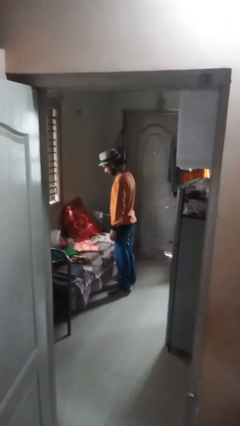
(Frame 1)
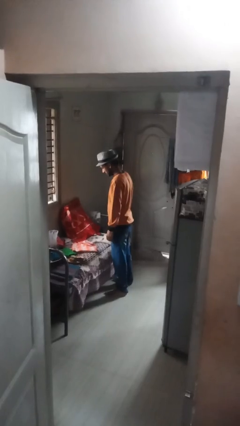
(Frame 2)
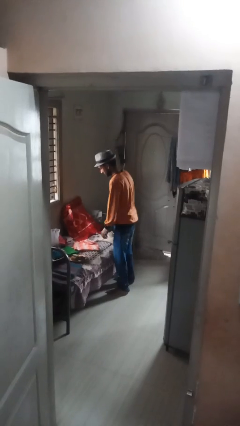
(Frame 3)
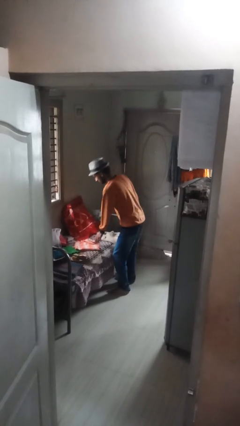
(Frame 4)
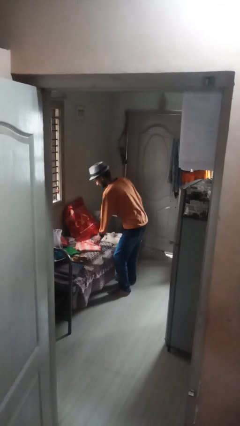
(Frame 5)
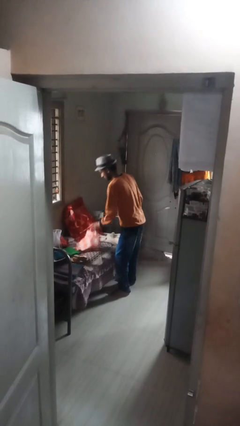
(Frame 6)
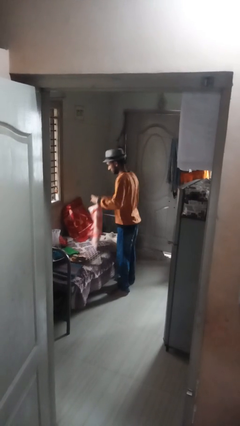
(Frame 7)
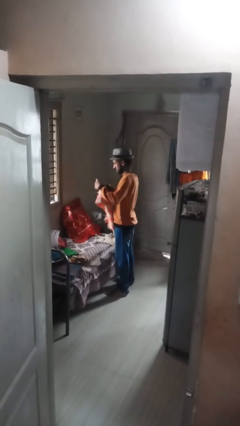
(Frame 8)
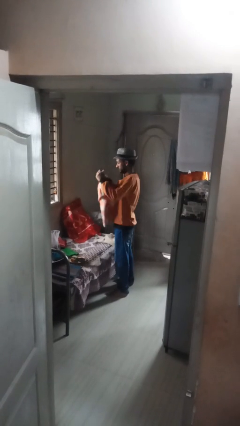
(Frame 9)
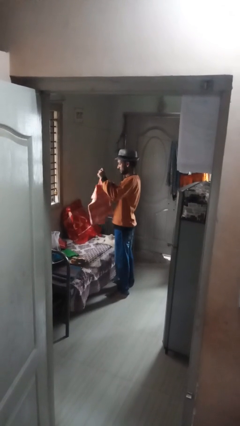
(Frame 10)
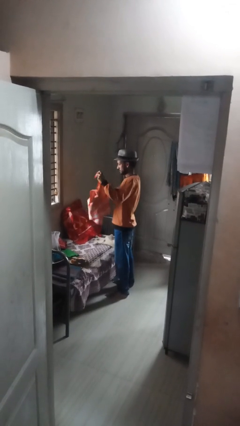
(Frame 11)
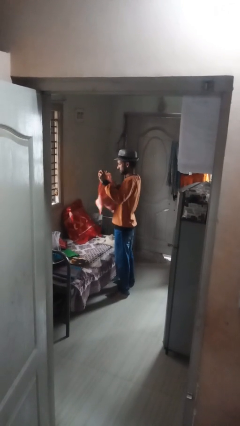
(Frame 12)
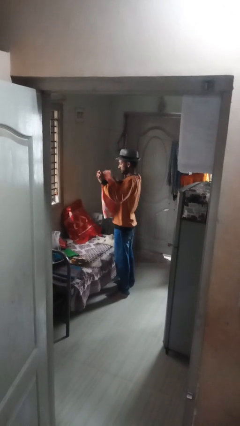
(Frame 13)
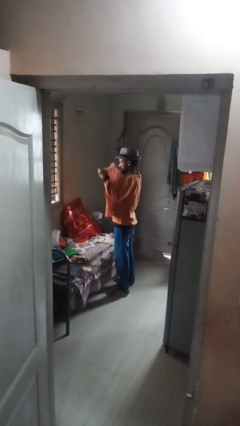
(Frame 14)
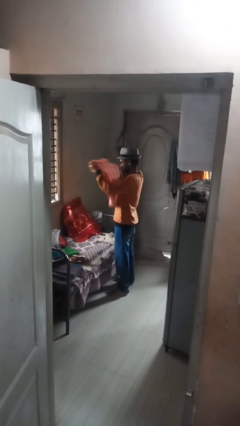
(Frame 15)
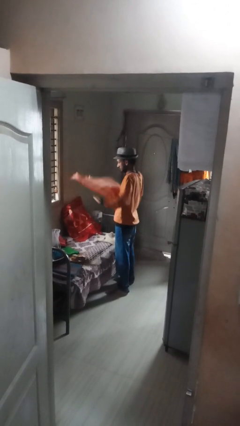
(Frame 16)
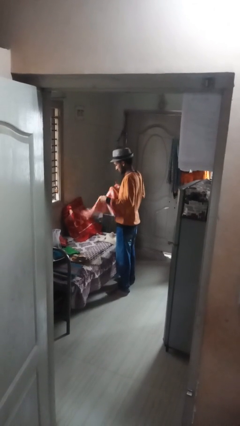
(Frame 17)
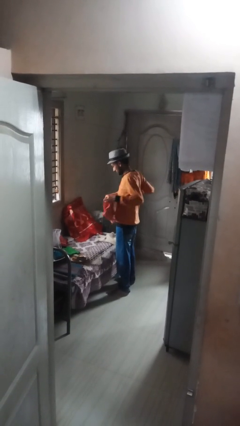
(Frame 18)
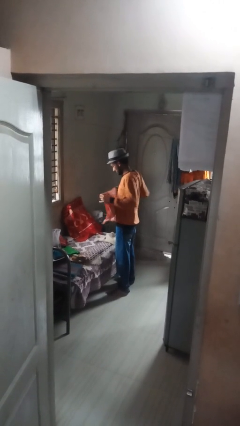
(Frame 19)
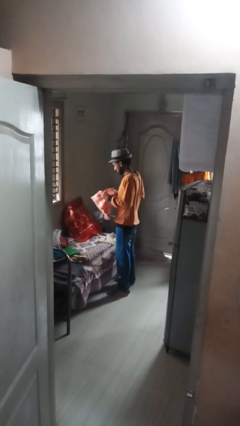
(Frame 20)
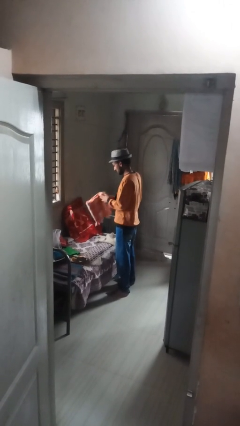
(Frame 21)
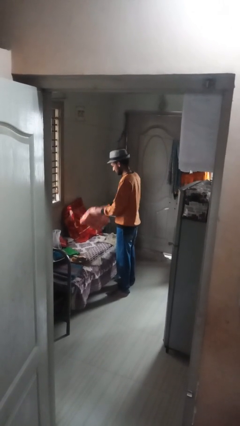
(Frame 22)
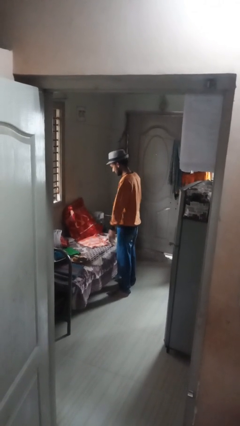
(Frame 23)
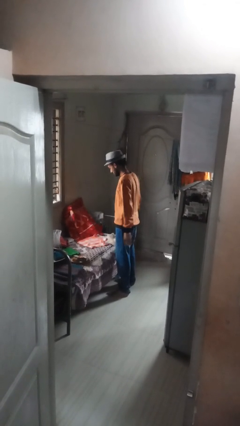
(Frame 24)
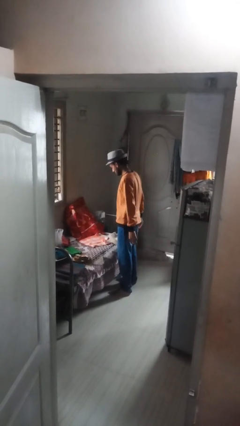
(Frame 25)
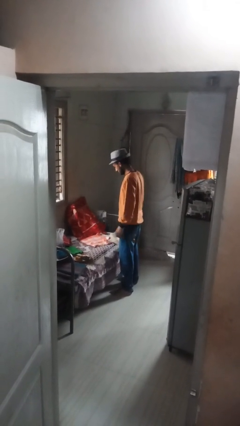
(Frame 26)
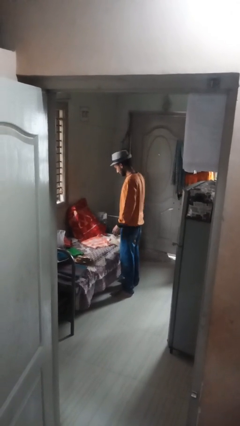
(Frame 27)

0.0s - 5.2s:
person folds towel

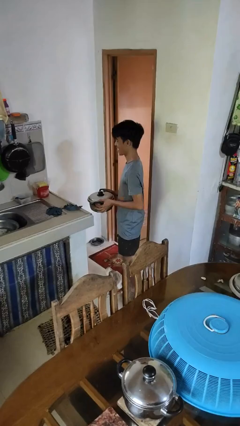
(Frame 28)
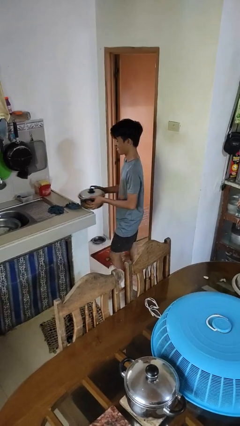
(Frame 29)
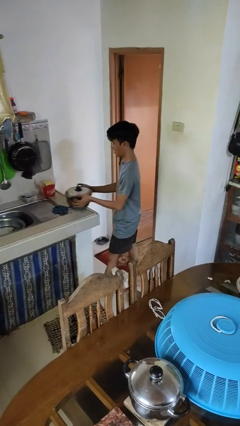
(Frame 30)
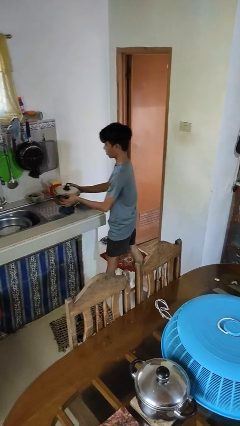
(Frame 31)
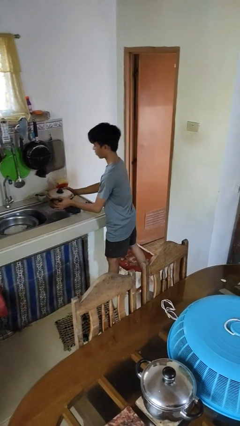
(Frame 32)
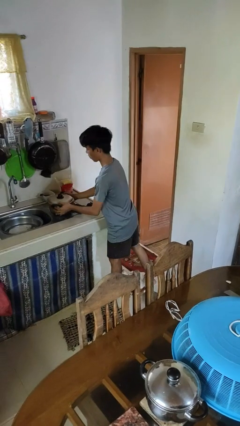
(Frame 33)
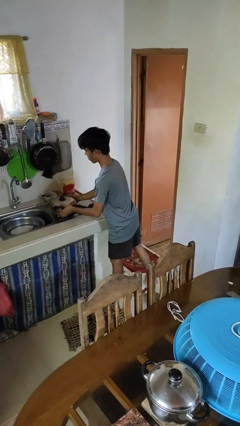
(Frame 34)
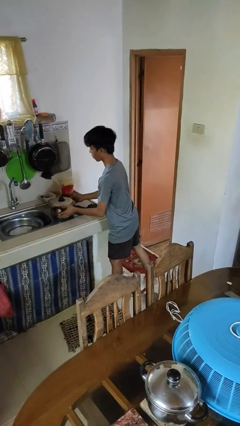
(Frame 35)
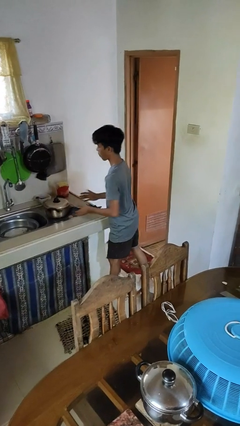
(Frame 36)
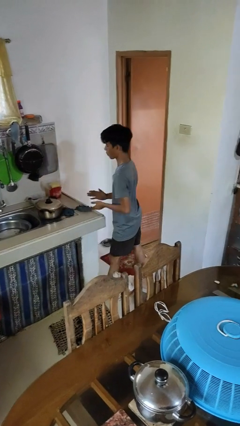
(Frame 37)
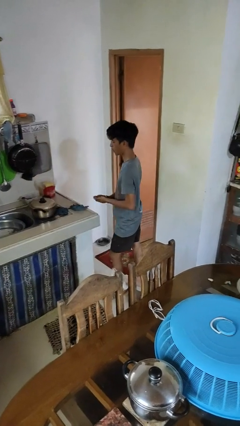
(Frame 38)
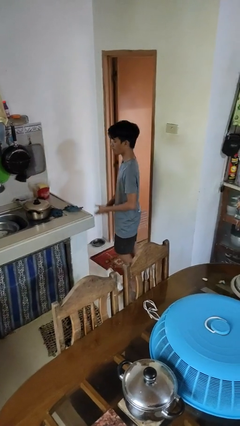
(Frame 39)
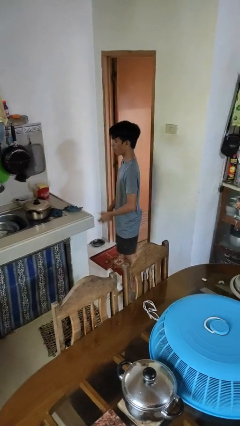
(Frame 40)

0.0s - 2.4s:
person puts down object on countertop

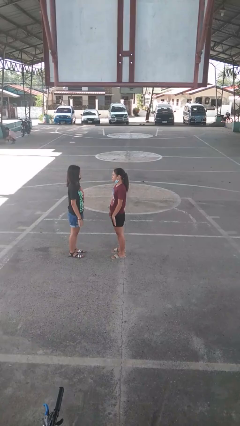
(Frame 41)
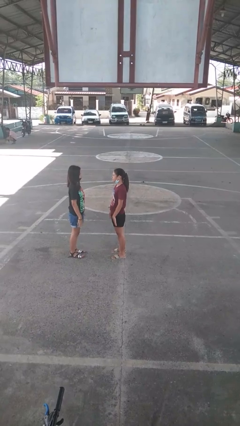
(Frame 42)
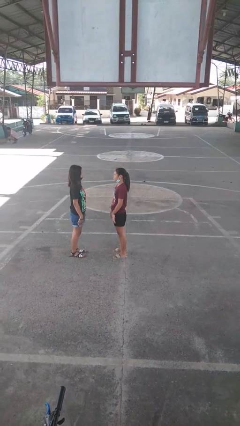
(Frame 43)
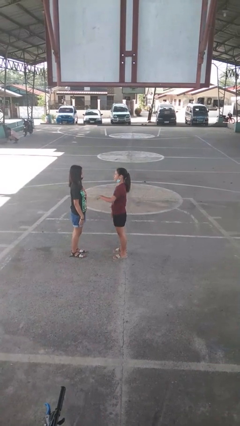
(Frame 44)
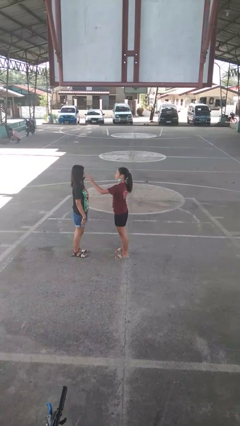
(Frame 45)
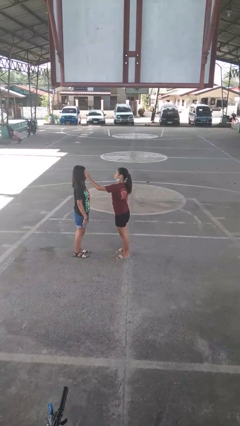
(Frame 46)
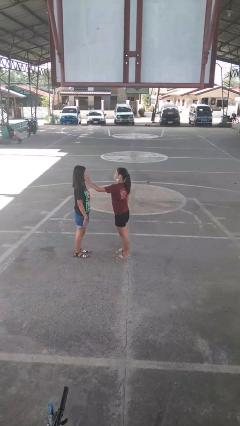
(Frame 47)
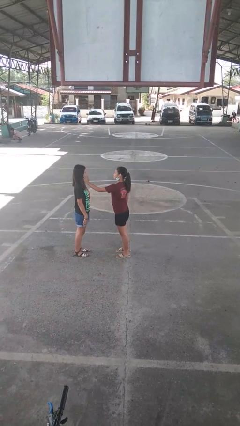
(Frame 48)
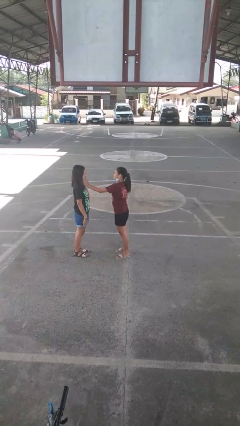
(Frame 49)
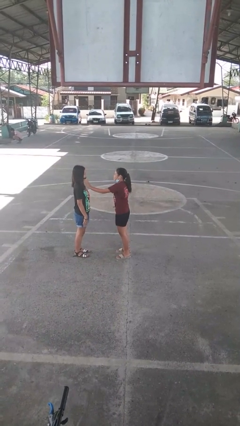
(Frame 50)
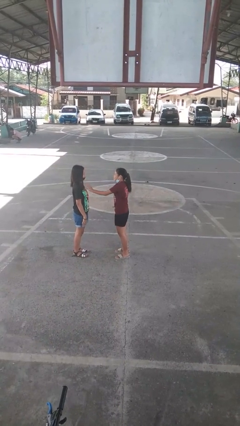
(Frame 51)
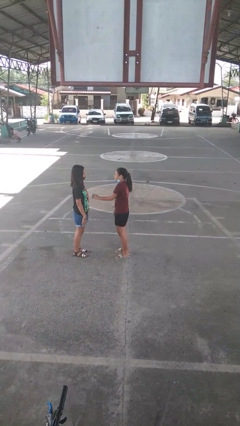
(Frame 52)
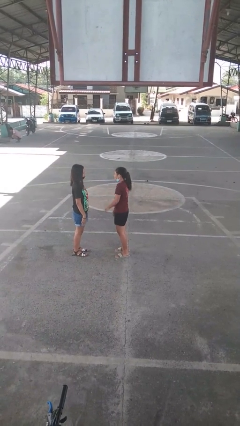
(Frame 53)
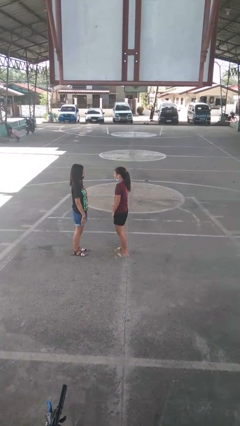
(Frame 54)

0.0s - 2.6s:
person touches face of person

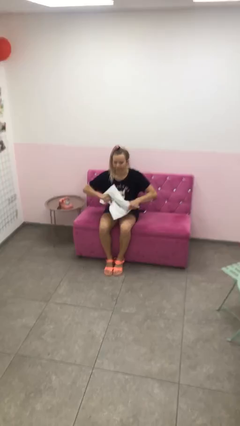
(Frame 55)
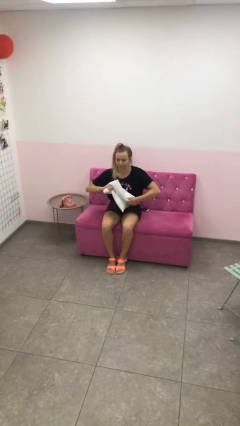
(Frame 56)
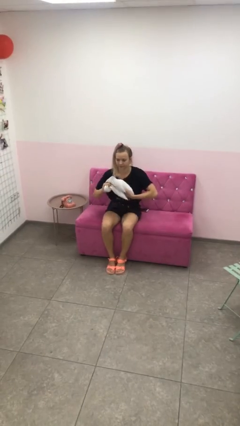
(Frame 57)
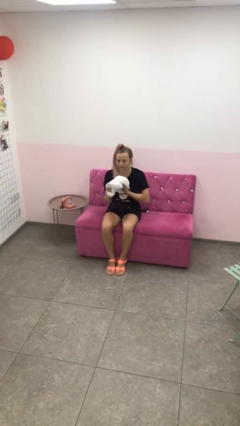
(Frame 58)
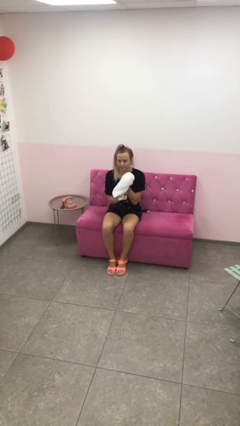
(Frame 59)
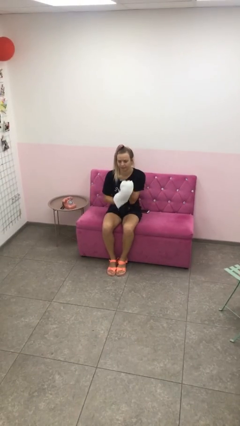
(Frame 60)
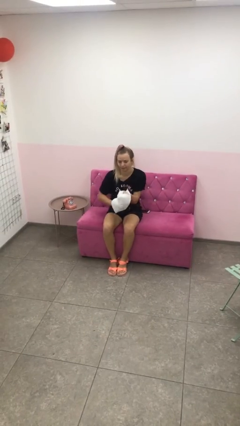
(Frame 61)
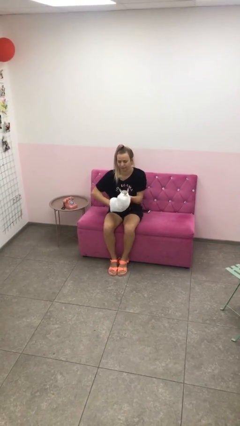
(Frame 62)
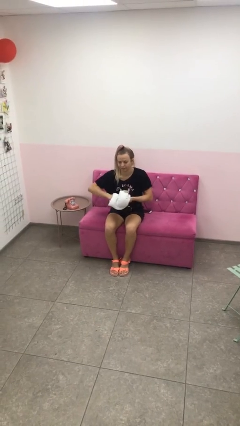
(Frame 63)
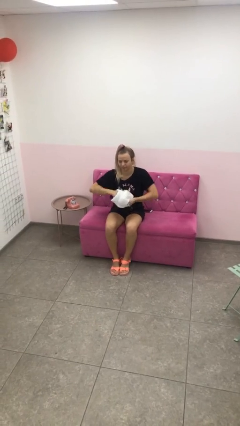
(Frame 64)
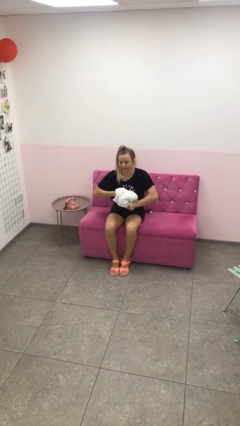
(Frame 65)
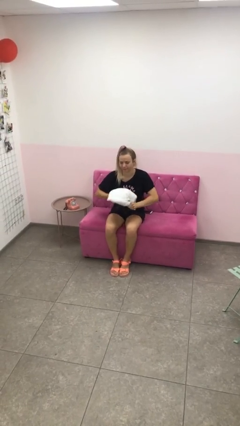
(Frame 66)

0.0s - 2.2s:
person squeezes object

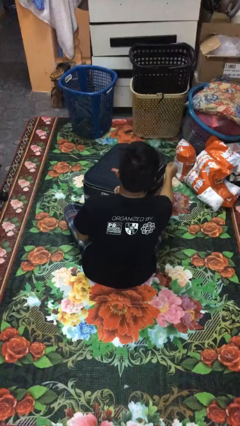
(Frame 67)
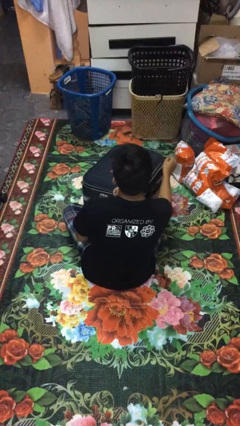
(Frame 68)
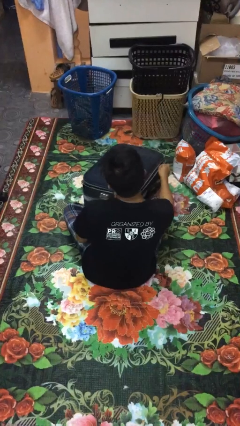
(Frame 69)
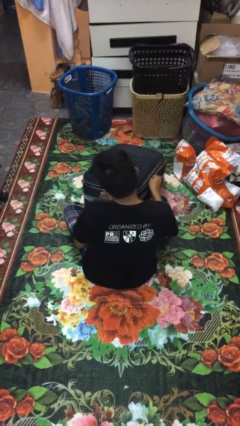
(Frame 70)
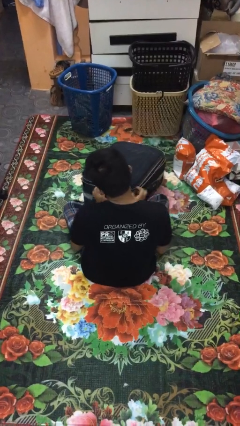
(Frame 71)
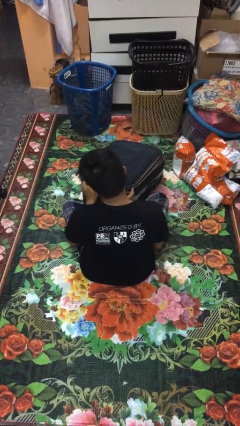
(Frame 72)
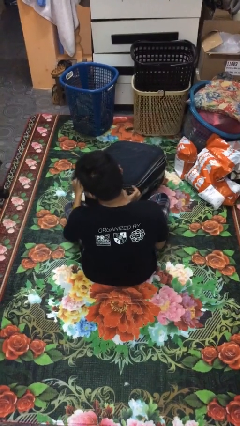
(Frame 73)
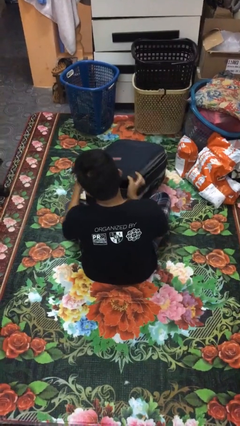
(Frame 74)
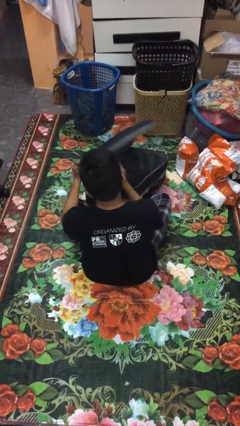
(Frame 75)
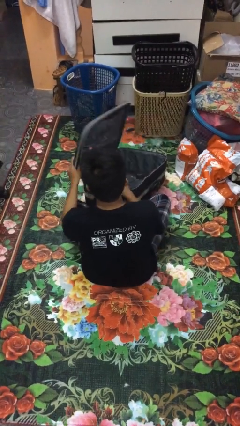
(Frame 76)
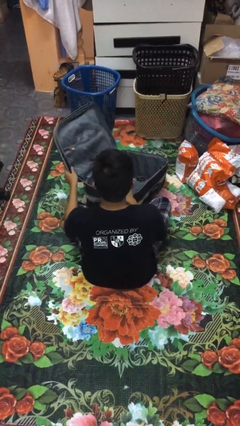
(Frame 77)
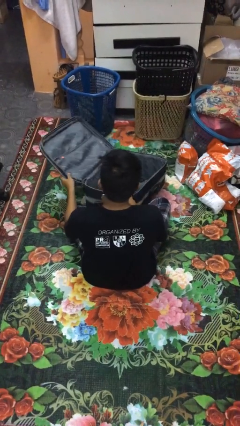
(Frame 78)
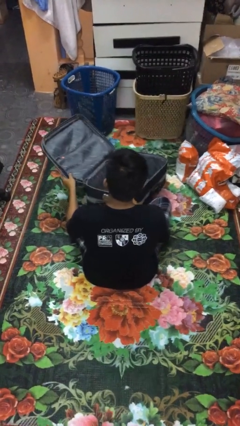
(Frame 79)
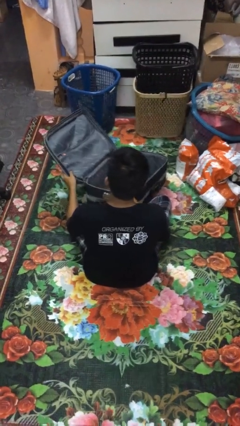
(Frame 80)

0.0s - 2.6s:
person opens suitcase

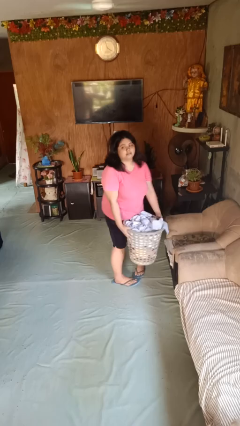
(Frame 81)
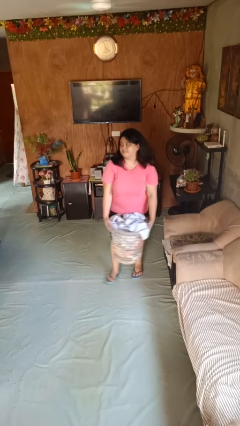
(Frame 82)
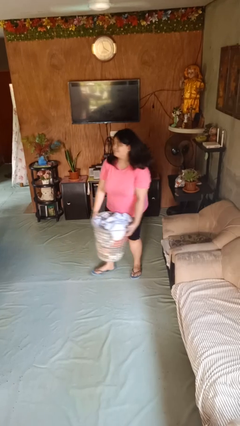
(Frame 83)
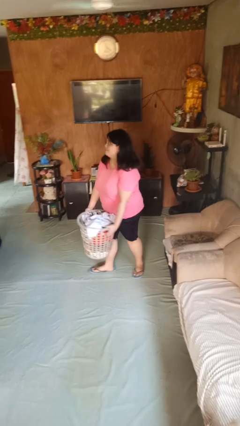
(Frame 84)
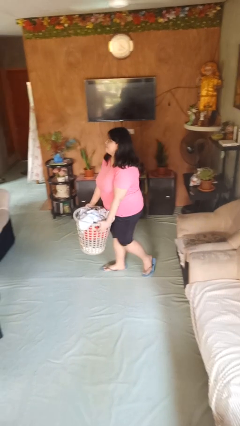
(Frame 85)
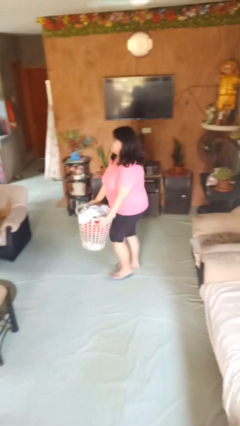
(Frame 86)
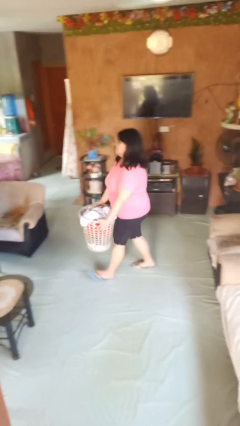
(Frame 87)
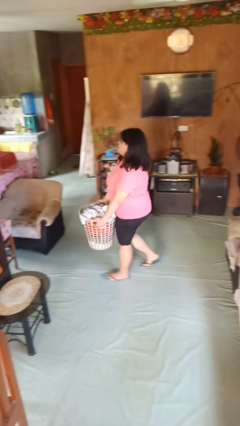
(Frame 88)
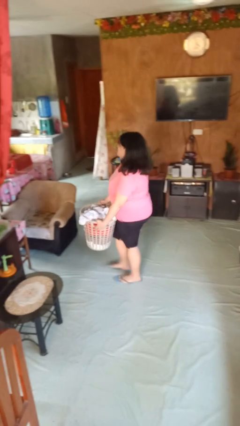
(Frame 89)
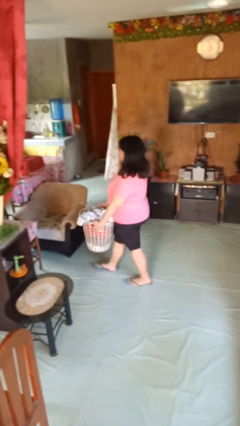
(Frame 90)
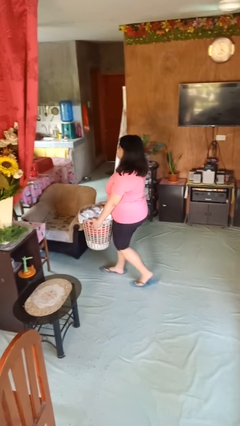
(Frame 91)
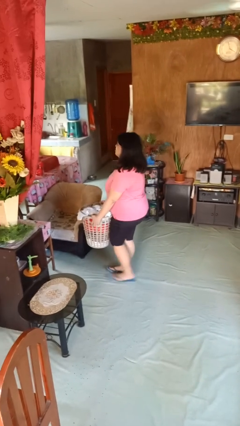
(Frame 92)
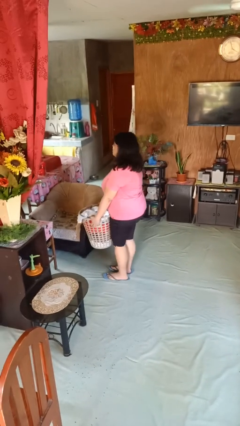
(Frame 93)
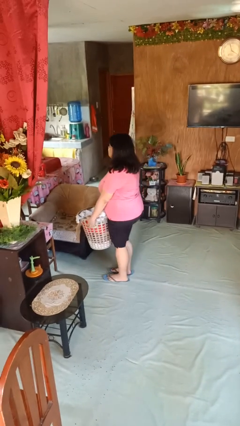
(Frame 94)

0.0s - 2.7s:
person carries laundry basket
